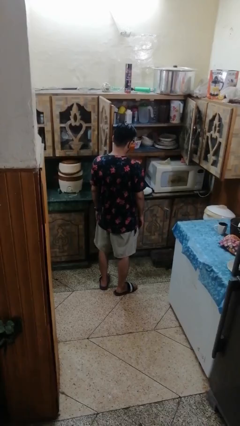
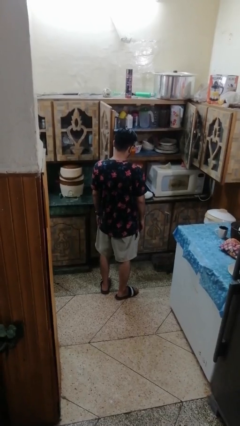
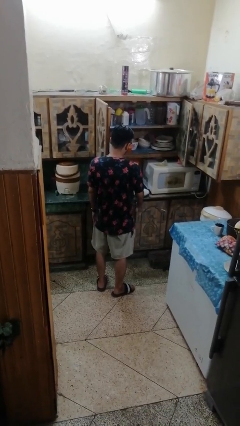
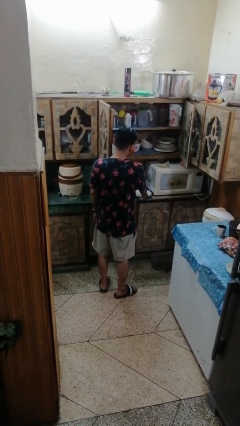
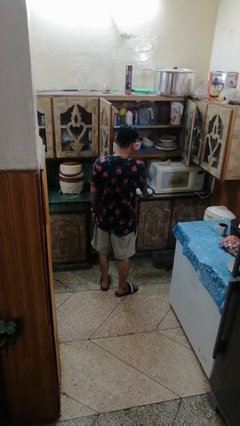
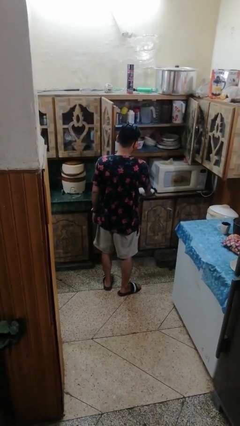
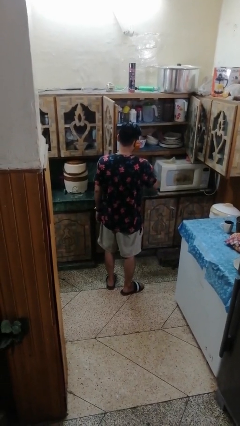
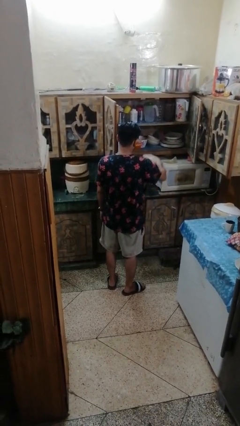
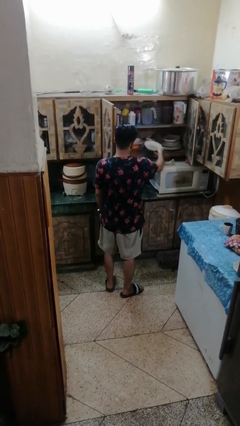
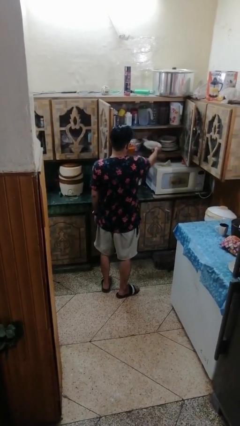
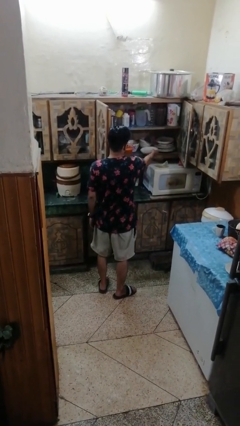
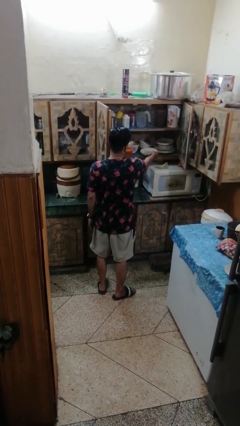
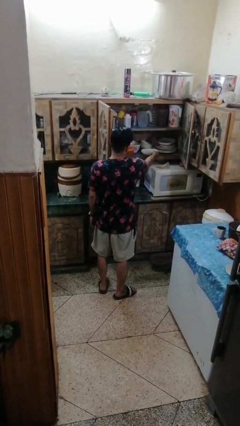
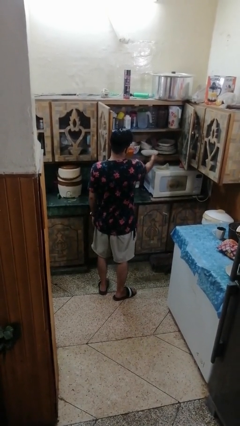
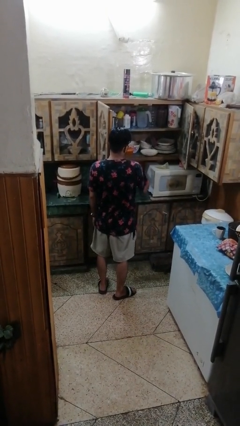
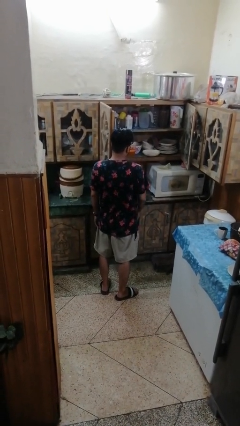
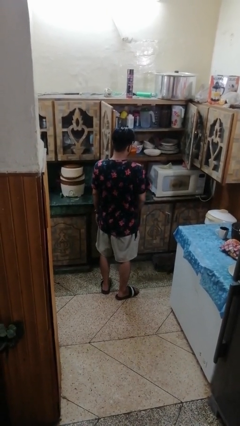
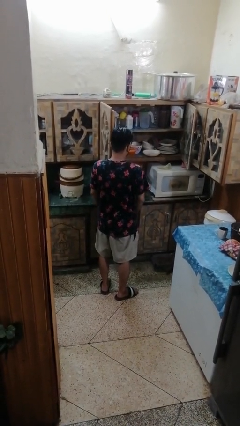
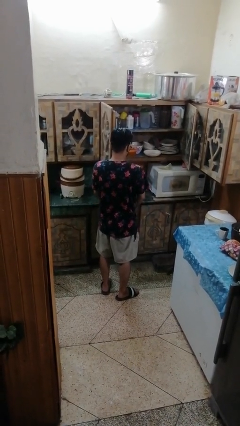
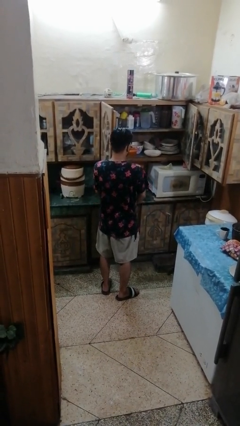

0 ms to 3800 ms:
person puts object in cabinet

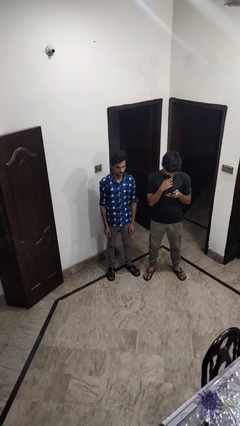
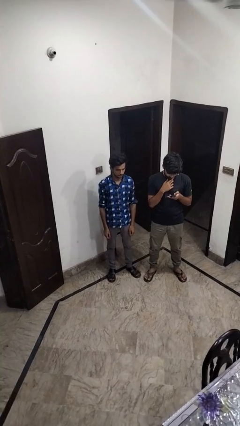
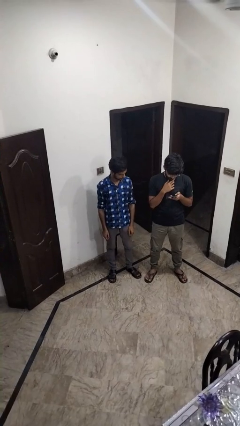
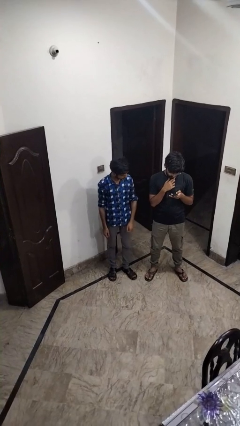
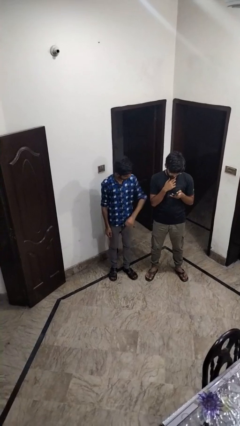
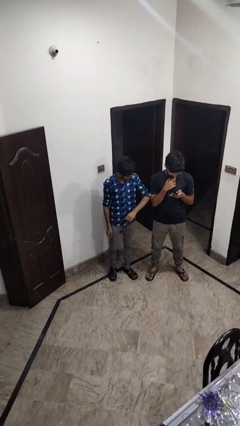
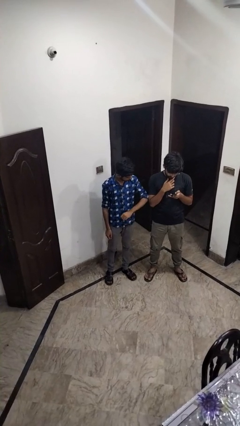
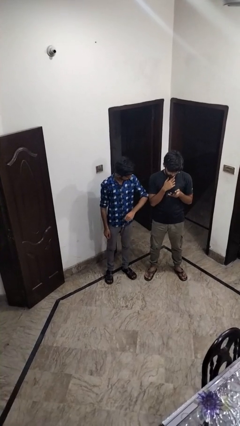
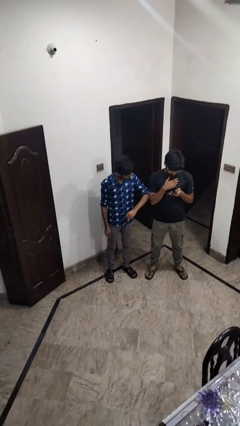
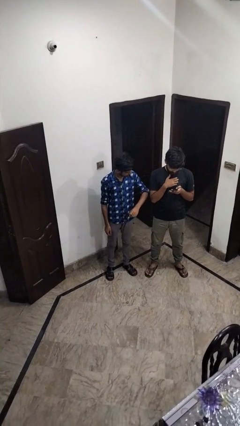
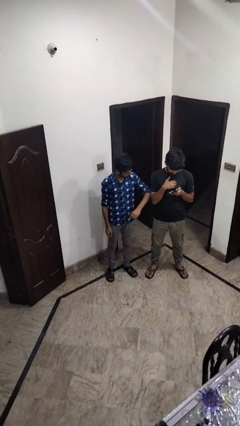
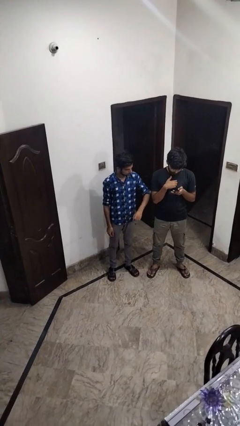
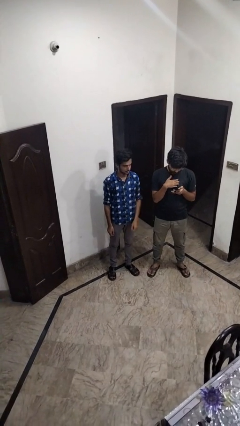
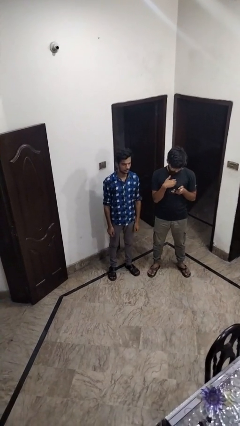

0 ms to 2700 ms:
person nudges person with elbow

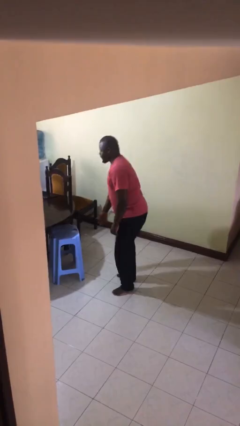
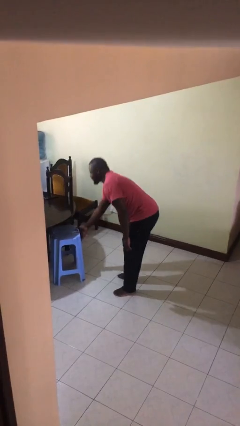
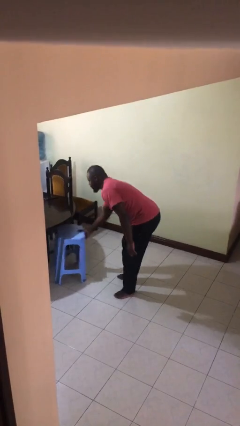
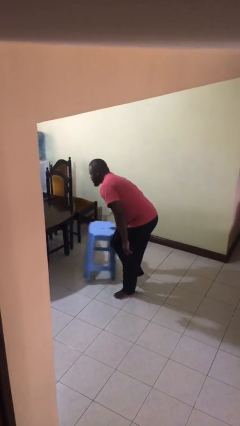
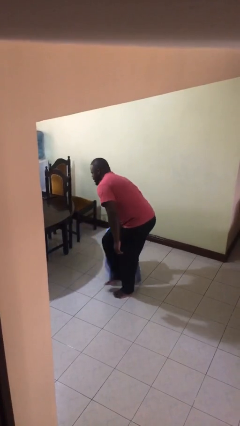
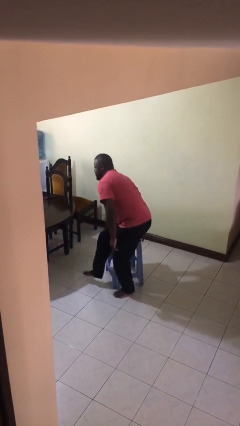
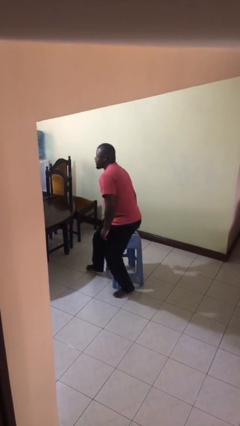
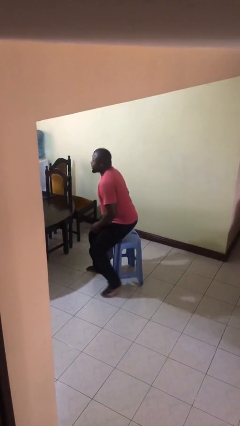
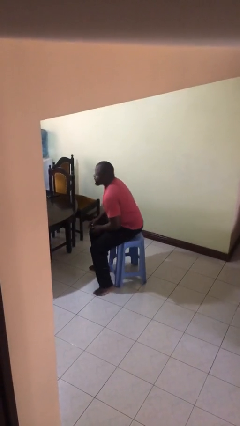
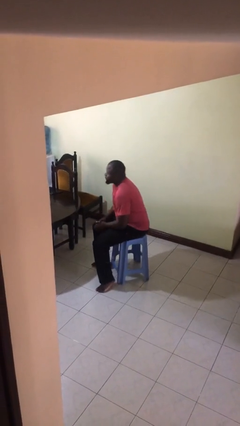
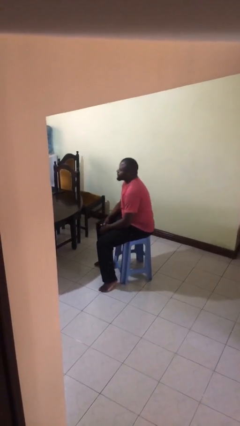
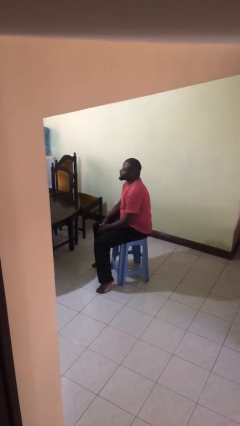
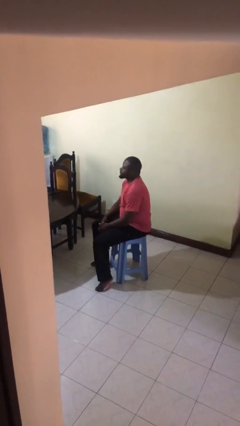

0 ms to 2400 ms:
person sits down

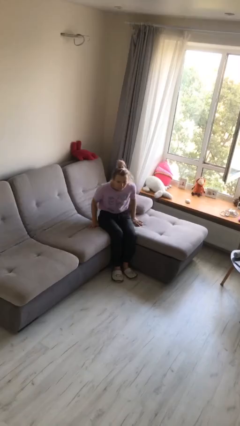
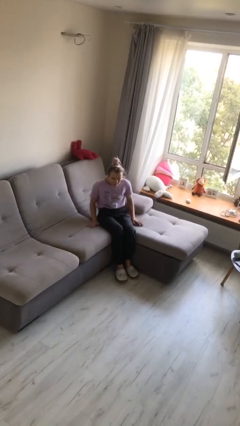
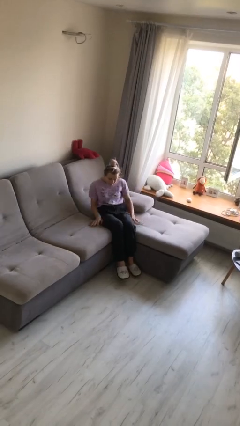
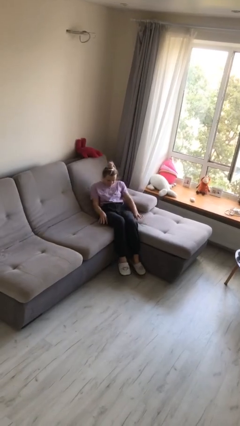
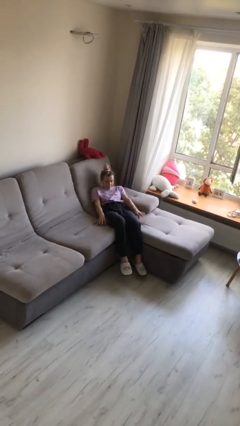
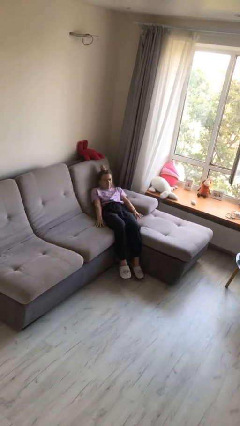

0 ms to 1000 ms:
person lies down on couch

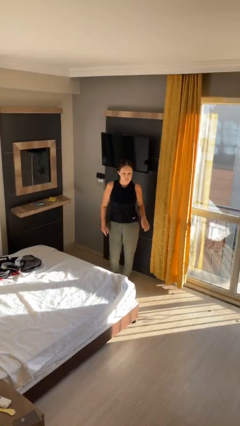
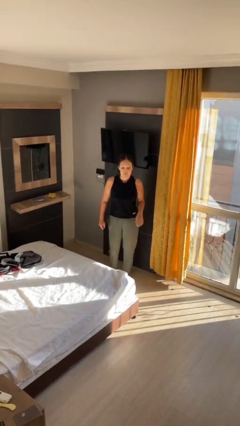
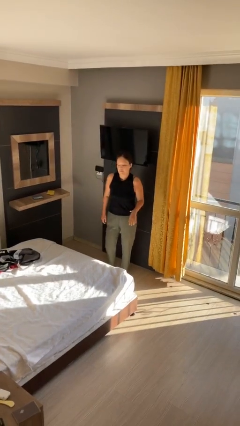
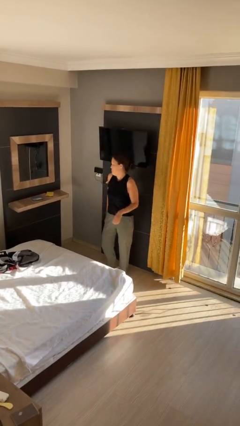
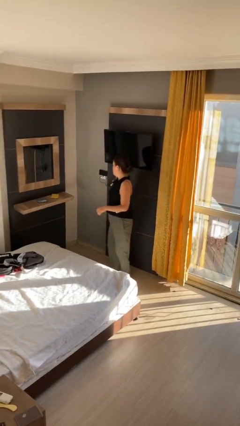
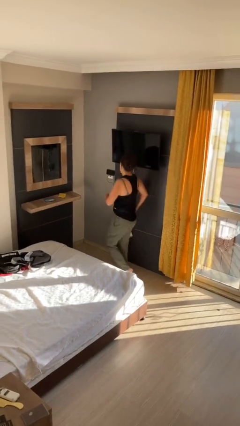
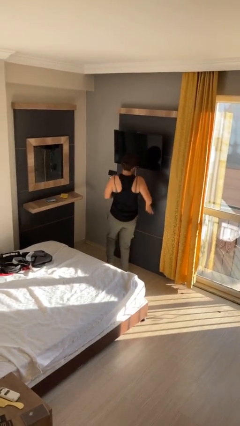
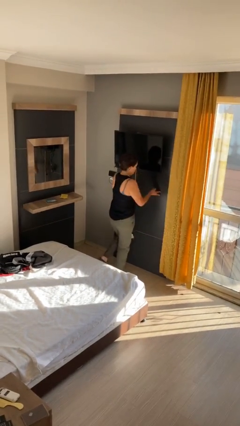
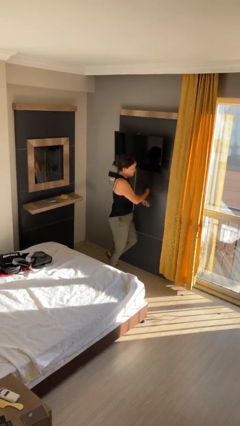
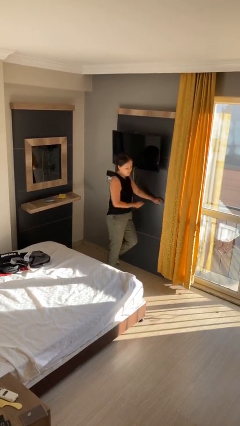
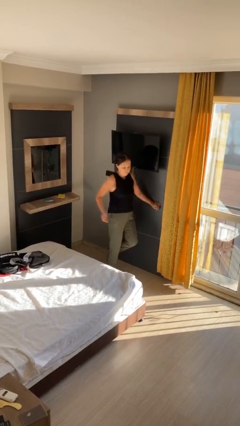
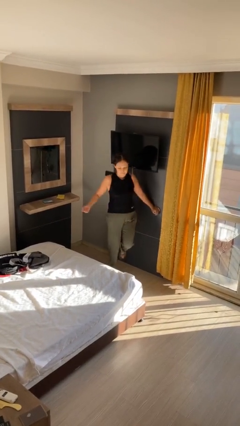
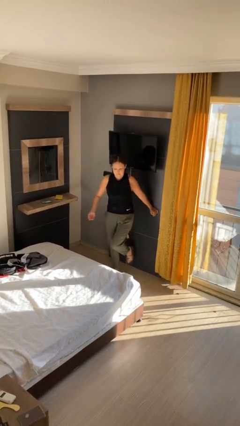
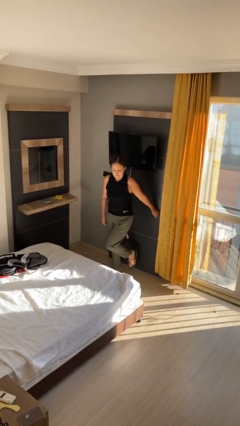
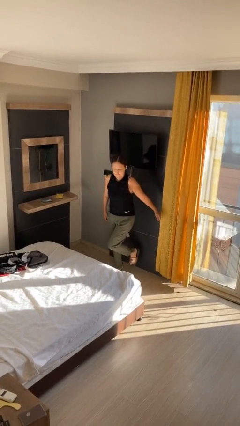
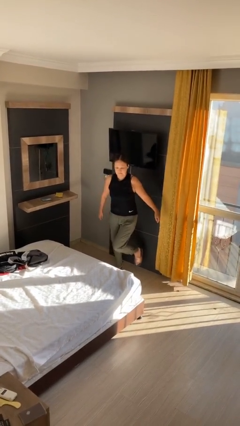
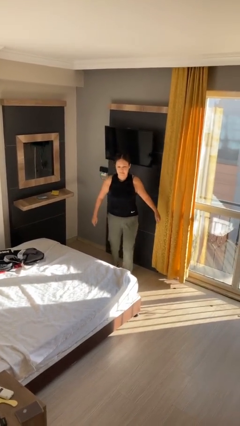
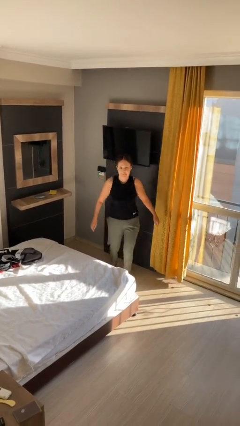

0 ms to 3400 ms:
person twirls

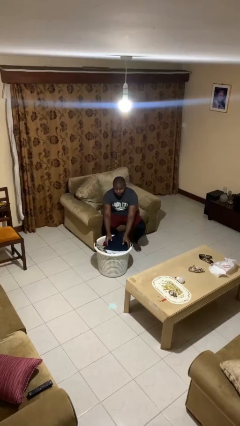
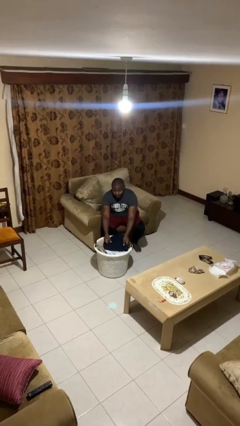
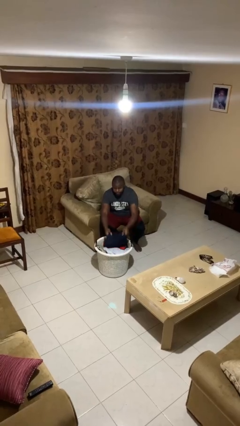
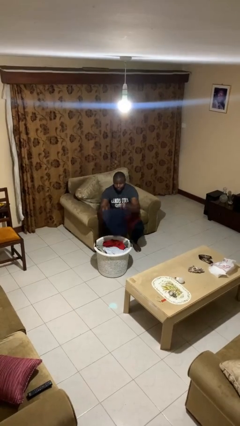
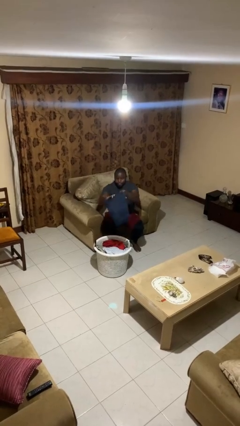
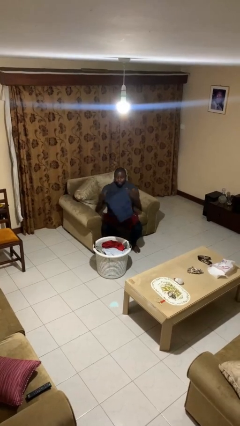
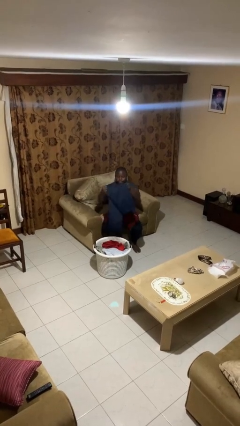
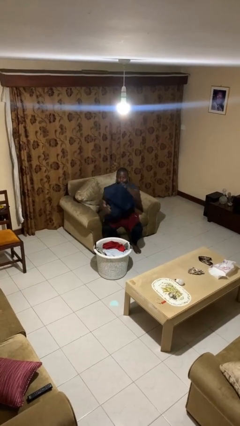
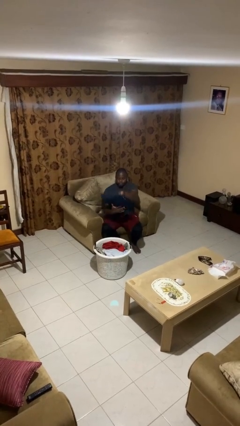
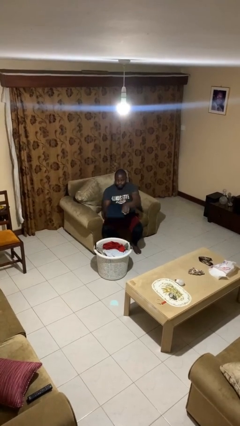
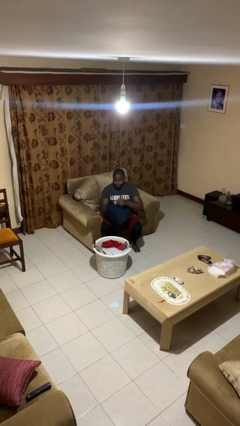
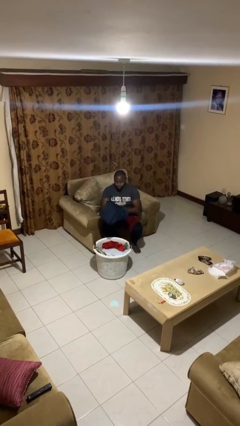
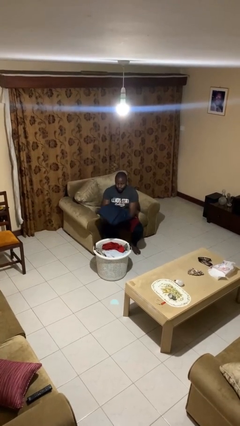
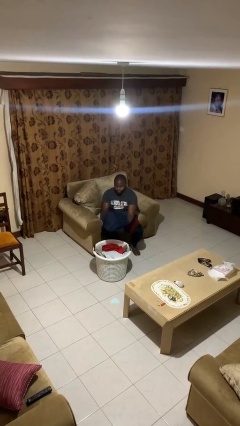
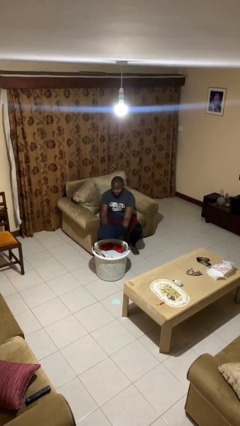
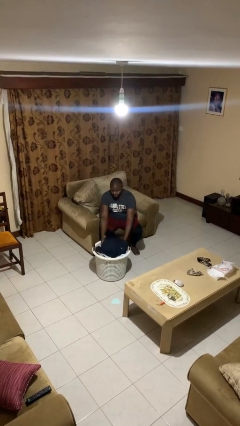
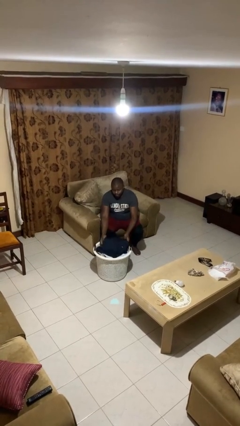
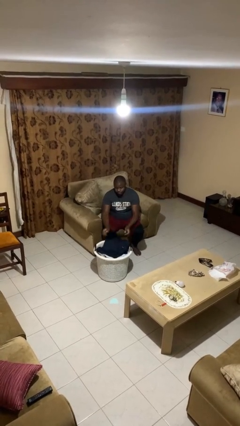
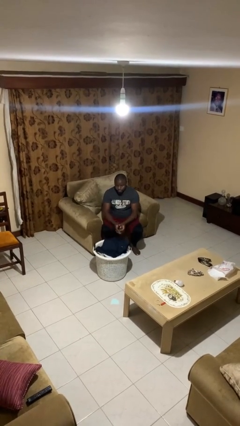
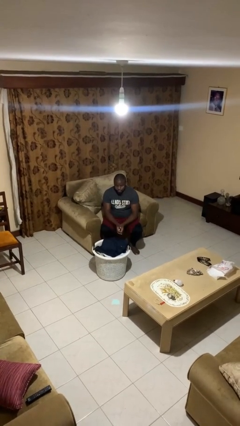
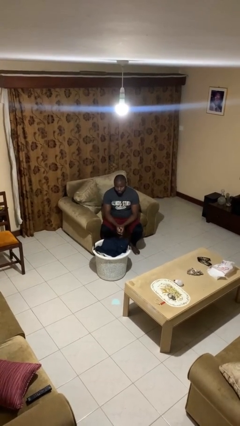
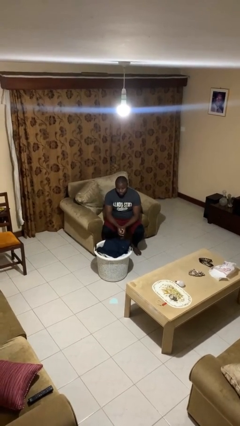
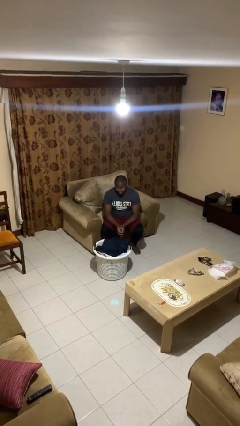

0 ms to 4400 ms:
person folds pants
